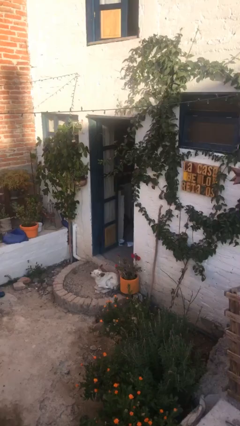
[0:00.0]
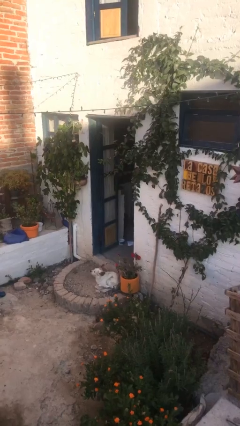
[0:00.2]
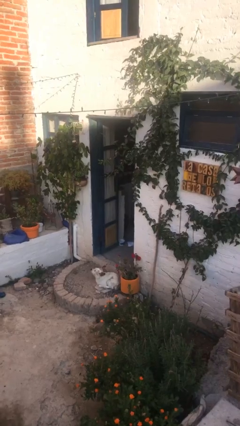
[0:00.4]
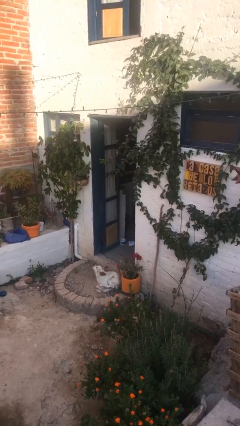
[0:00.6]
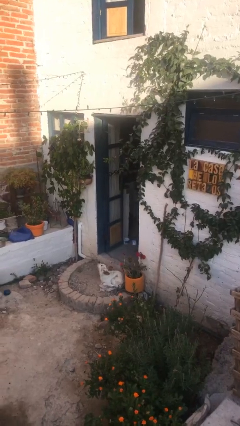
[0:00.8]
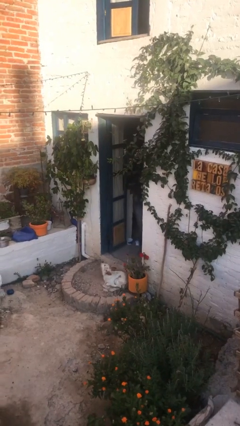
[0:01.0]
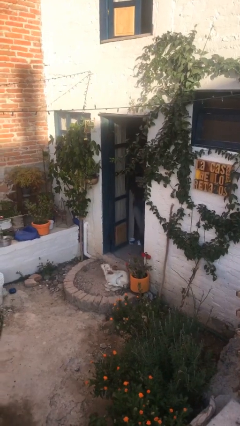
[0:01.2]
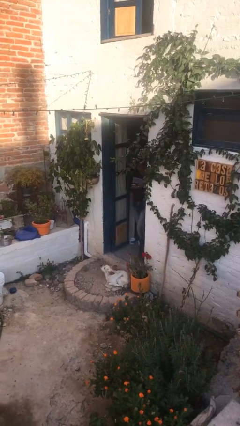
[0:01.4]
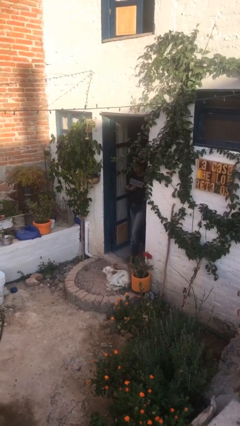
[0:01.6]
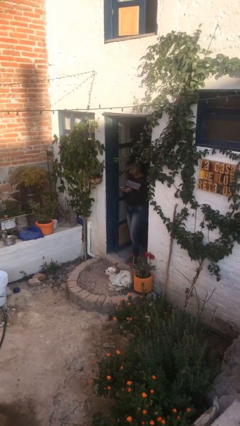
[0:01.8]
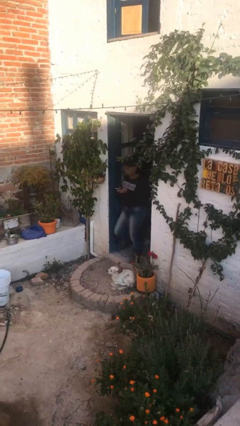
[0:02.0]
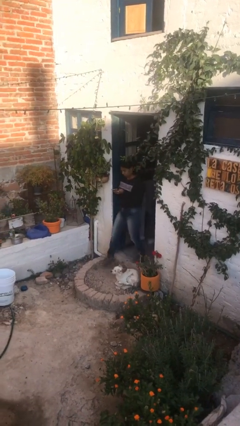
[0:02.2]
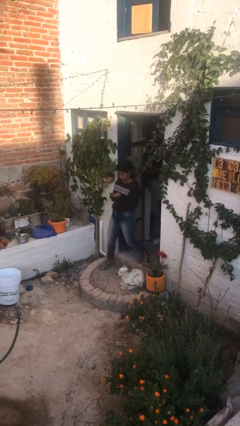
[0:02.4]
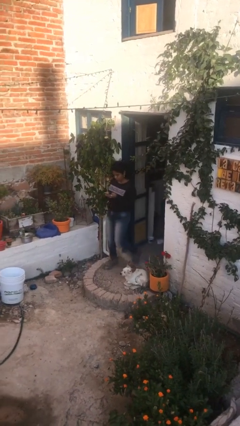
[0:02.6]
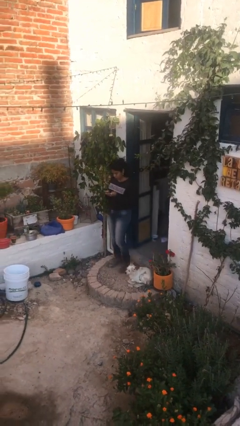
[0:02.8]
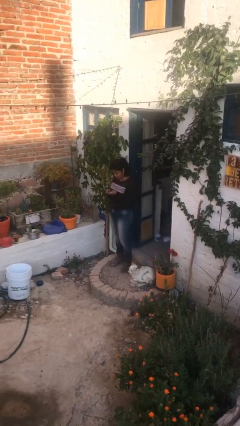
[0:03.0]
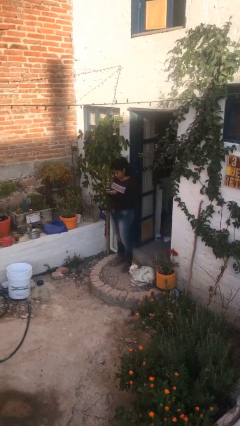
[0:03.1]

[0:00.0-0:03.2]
person enters scene through structure

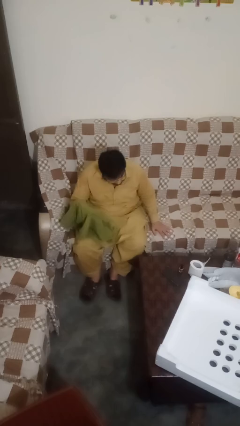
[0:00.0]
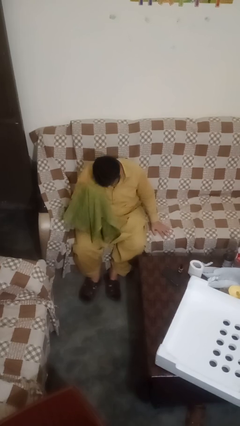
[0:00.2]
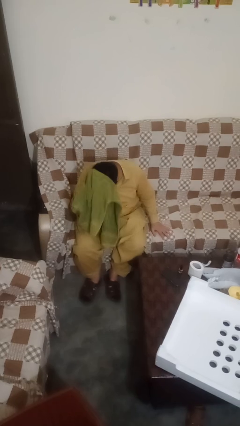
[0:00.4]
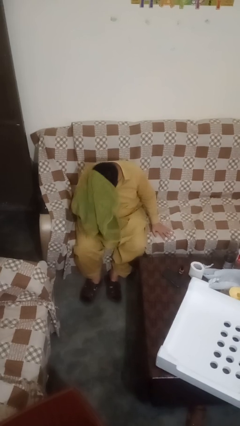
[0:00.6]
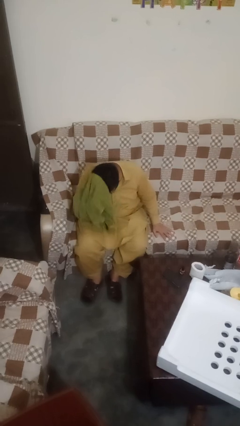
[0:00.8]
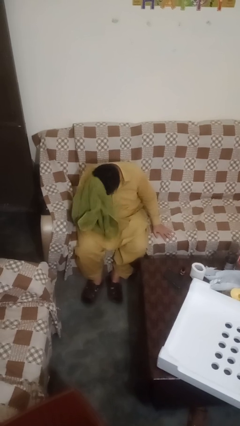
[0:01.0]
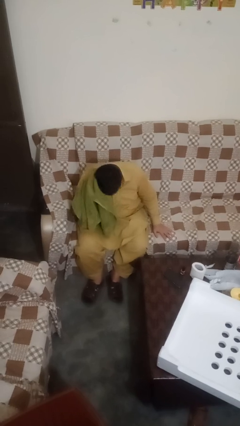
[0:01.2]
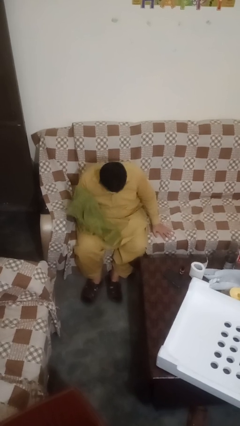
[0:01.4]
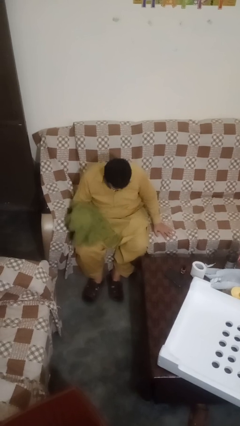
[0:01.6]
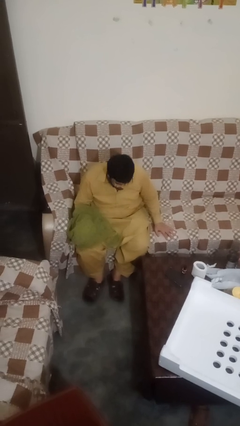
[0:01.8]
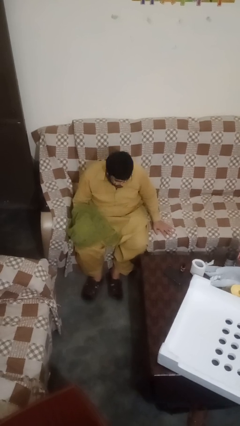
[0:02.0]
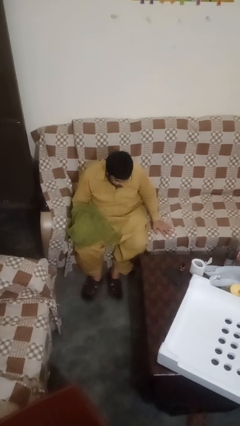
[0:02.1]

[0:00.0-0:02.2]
person dries hair with towel

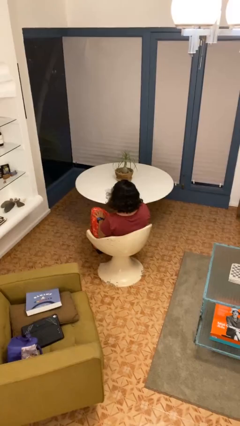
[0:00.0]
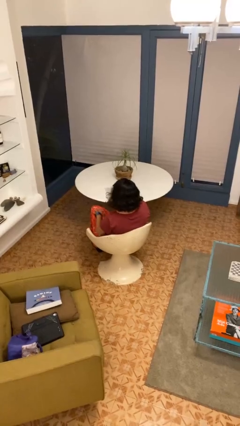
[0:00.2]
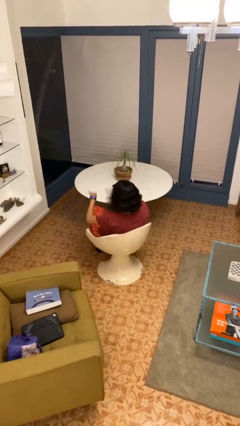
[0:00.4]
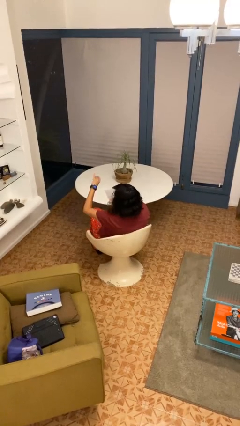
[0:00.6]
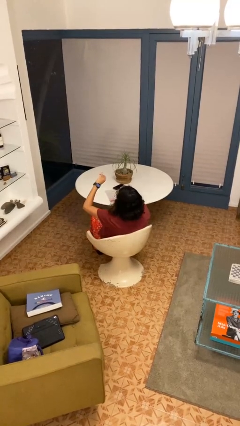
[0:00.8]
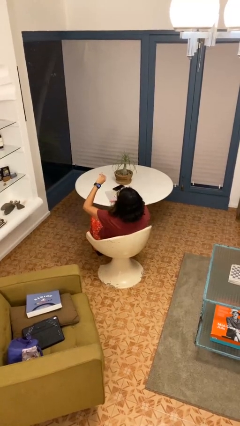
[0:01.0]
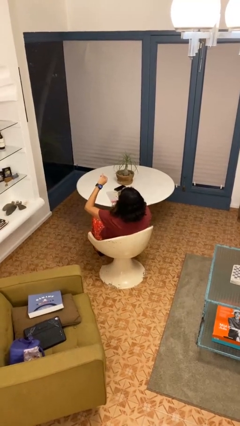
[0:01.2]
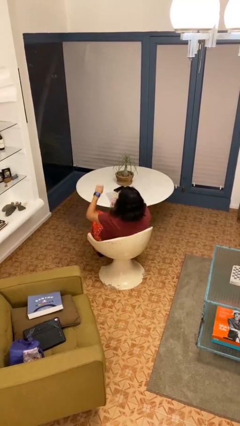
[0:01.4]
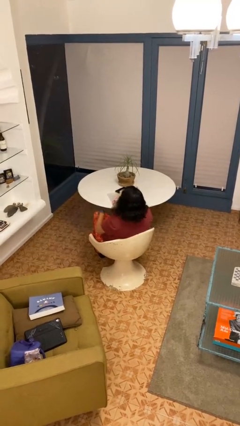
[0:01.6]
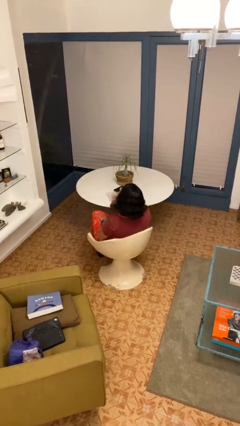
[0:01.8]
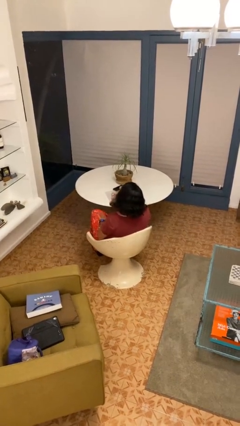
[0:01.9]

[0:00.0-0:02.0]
person looks at wristwatch

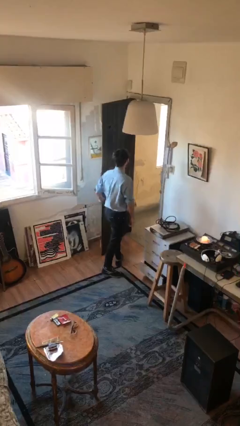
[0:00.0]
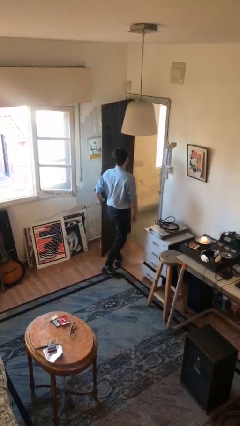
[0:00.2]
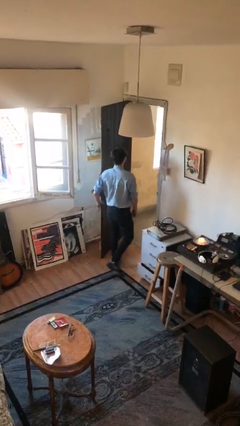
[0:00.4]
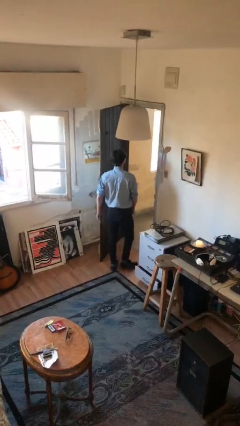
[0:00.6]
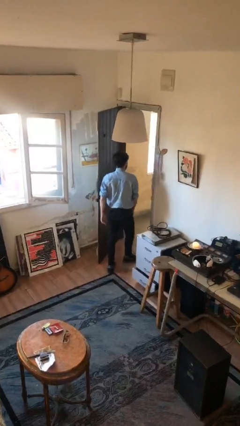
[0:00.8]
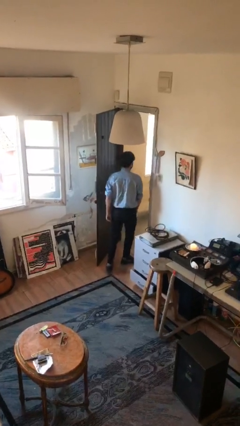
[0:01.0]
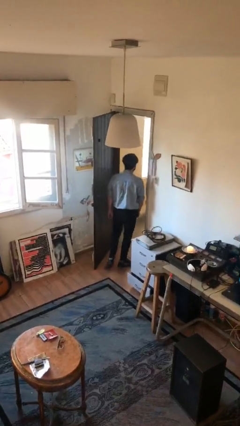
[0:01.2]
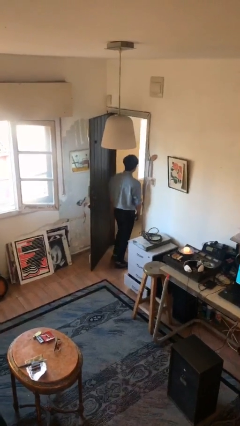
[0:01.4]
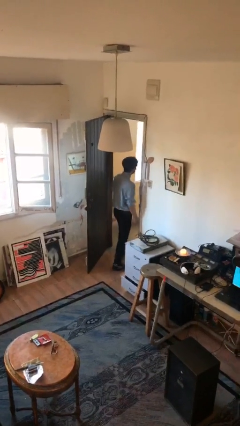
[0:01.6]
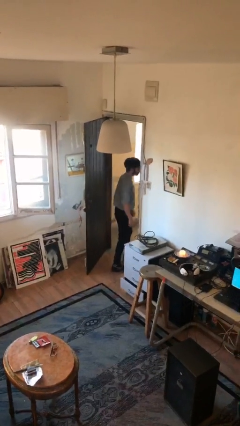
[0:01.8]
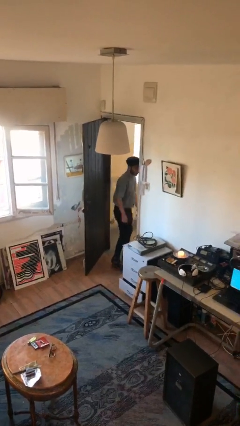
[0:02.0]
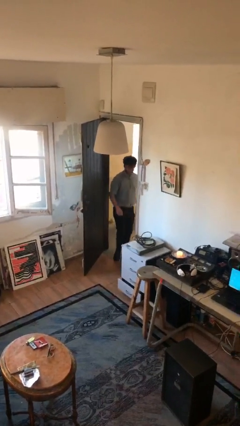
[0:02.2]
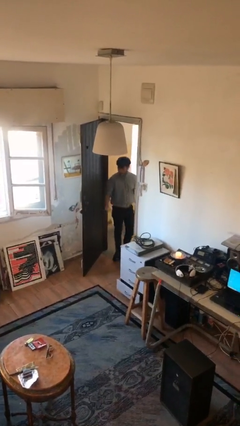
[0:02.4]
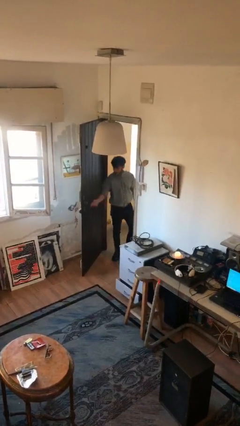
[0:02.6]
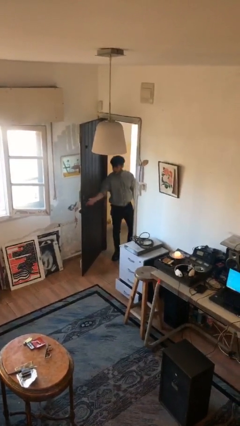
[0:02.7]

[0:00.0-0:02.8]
person exits scene through structure

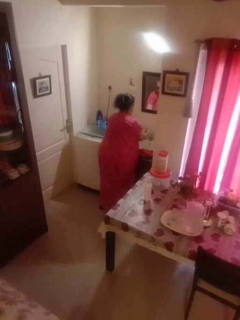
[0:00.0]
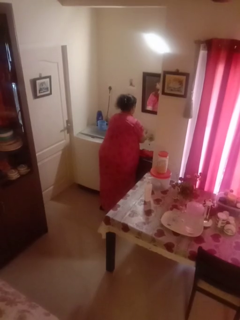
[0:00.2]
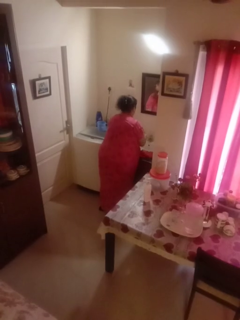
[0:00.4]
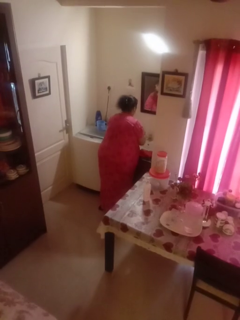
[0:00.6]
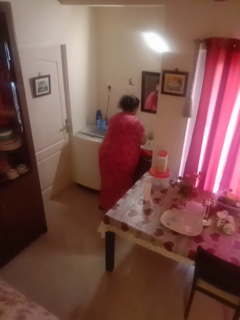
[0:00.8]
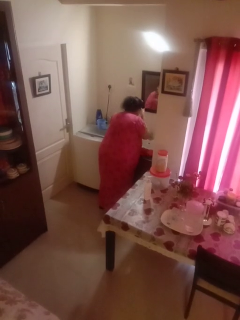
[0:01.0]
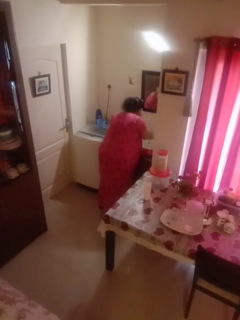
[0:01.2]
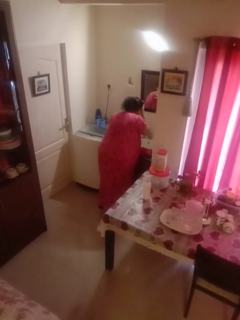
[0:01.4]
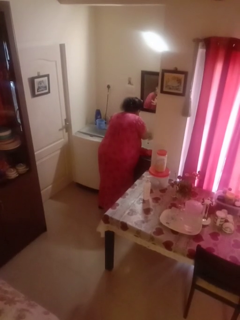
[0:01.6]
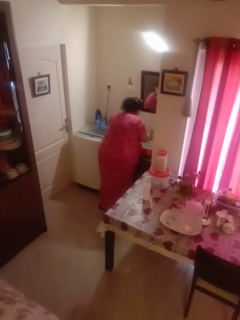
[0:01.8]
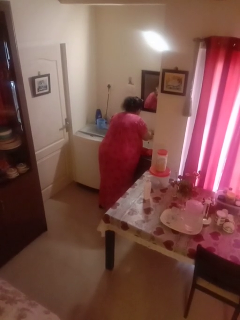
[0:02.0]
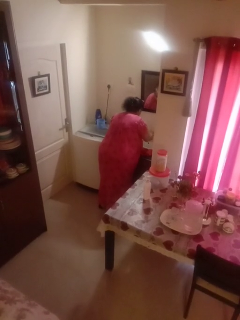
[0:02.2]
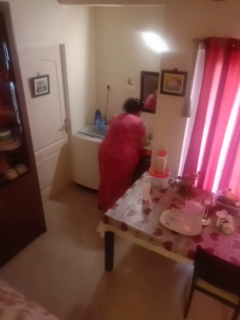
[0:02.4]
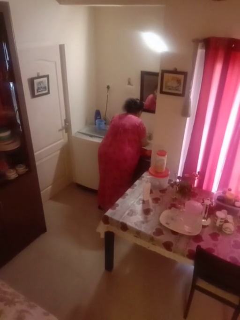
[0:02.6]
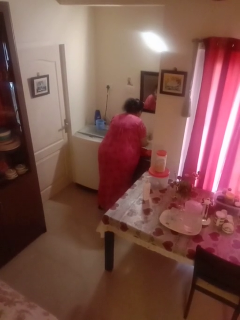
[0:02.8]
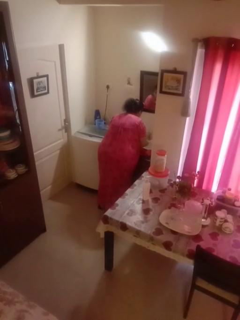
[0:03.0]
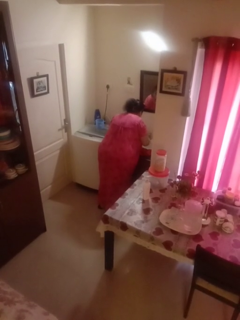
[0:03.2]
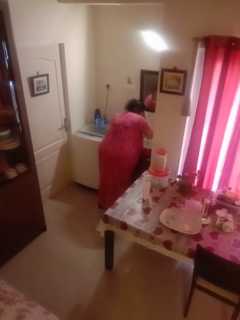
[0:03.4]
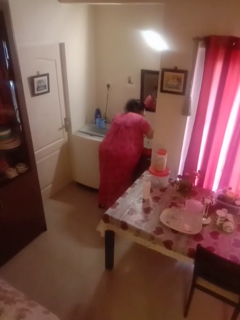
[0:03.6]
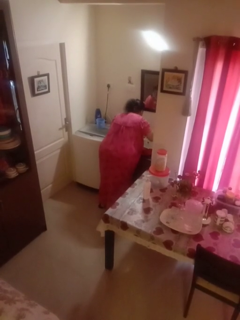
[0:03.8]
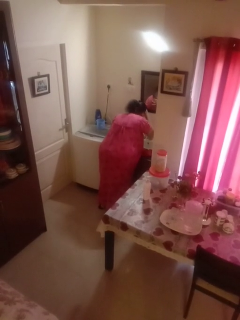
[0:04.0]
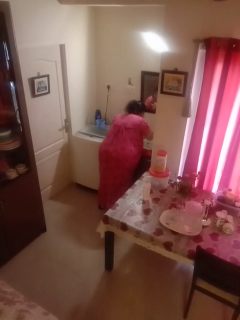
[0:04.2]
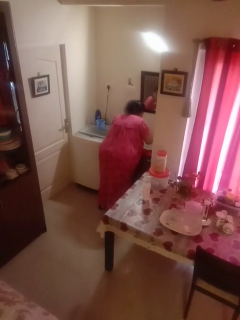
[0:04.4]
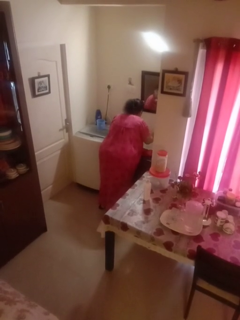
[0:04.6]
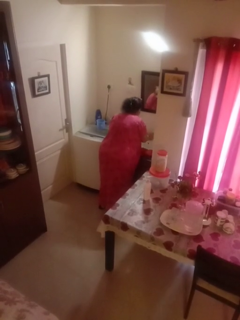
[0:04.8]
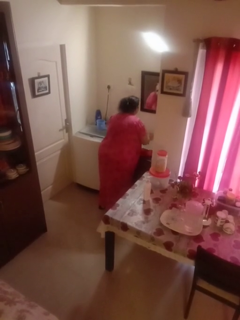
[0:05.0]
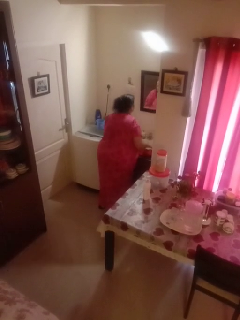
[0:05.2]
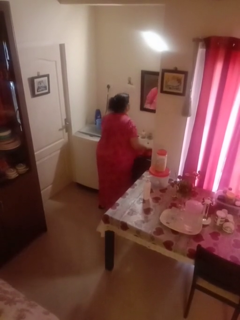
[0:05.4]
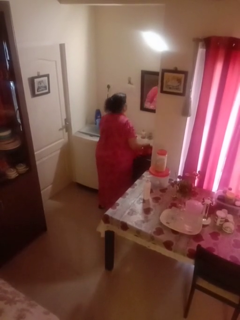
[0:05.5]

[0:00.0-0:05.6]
person washes face

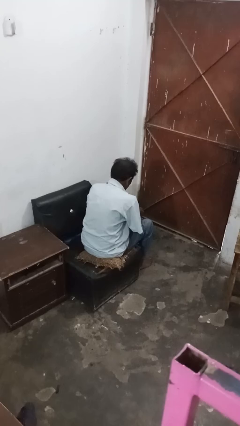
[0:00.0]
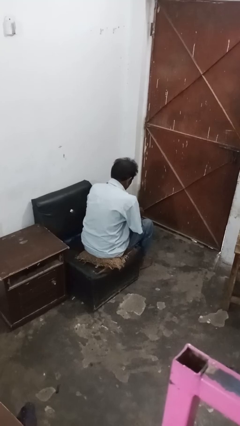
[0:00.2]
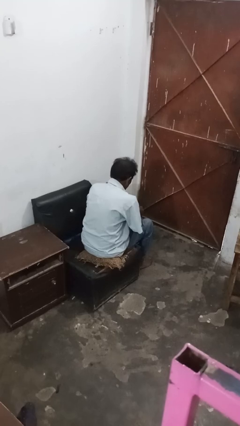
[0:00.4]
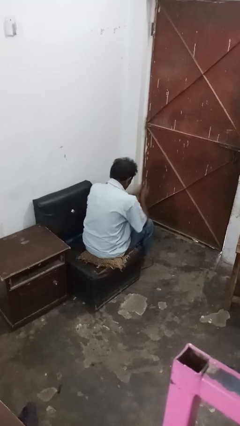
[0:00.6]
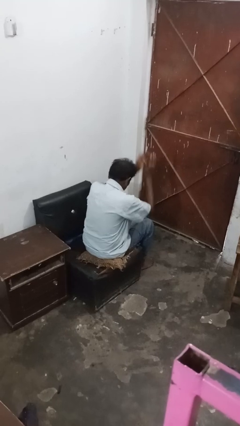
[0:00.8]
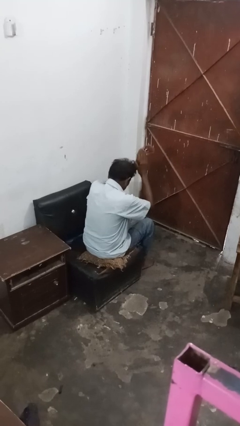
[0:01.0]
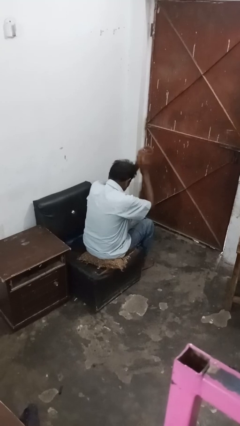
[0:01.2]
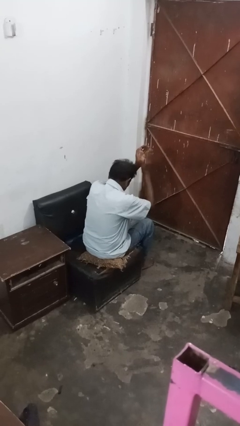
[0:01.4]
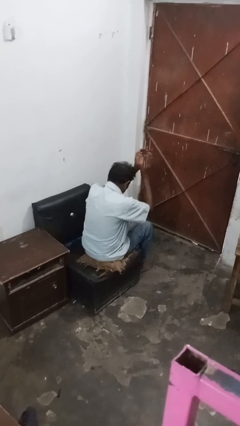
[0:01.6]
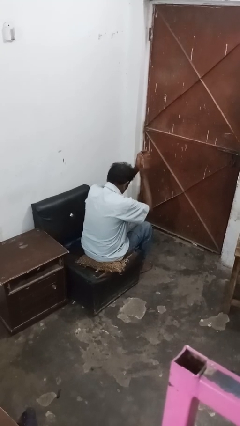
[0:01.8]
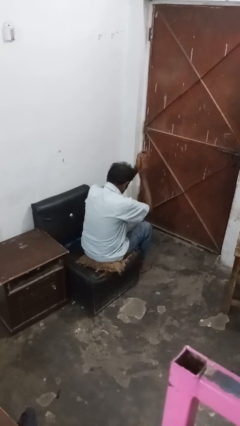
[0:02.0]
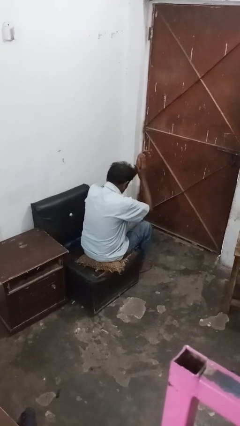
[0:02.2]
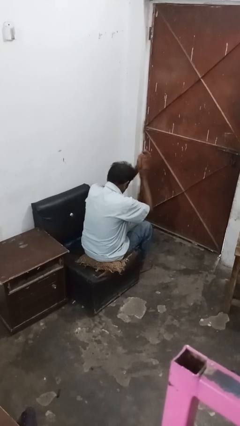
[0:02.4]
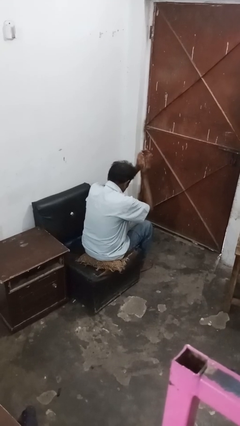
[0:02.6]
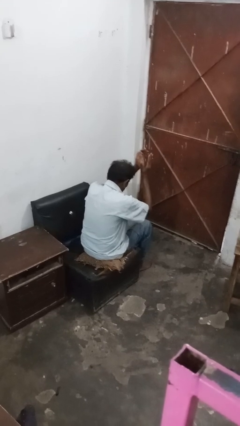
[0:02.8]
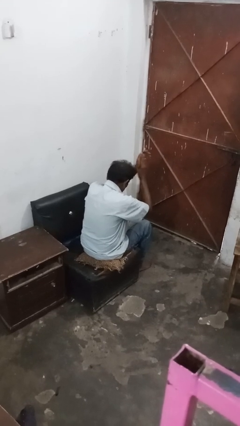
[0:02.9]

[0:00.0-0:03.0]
person claps hands
